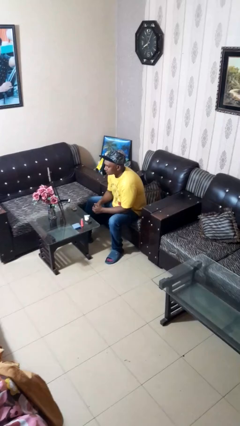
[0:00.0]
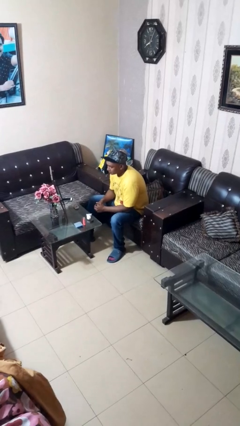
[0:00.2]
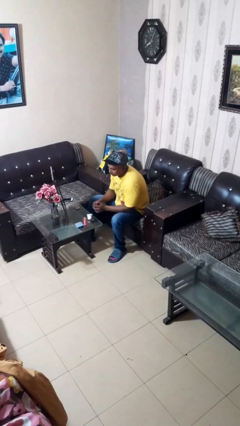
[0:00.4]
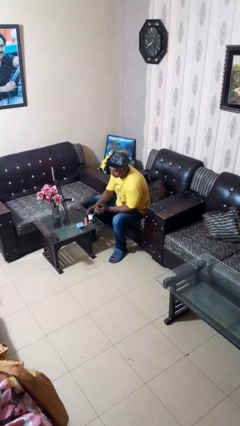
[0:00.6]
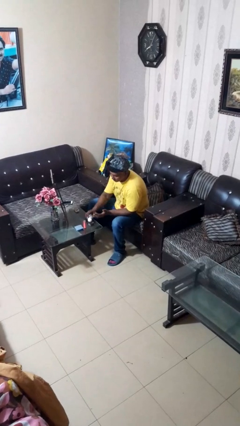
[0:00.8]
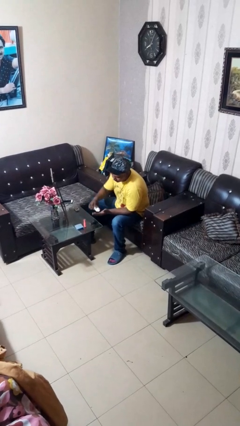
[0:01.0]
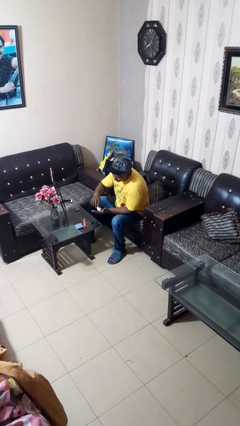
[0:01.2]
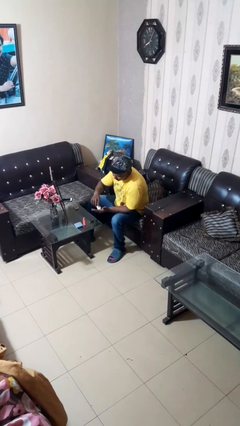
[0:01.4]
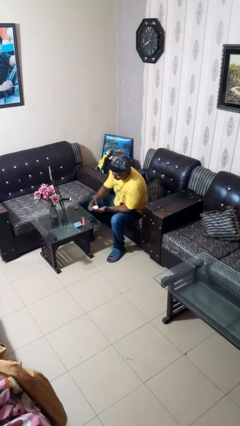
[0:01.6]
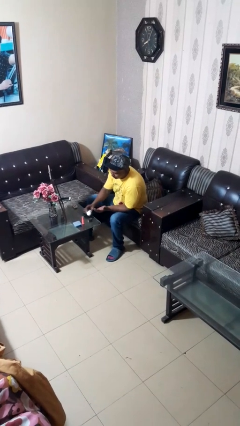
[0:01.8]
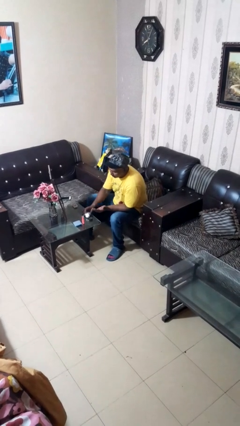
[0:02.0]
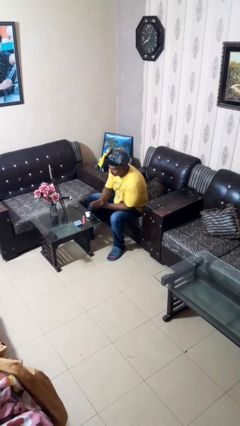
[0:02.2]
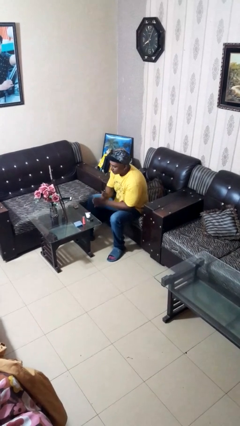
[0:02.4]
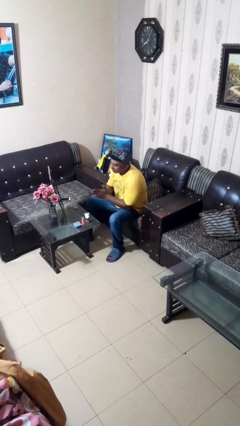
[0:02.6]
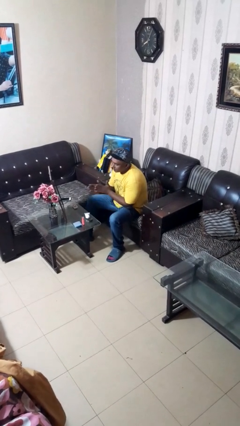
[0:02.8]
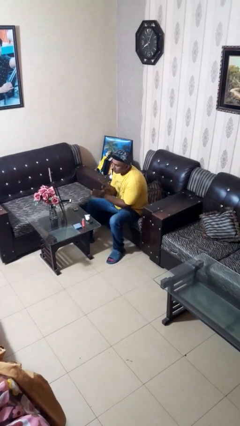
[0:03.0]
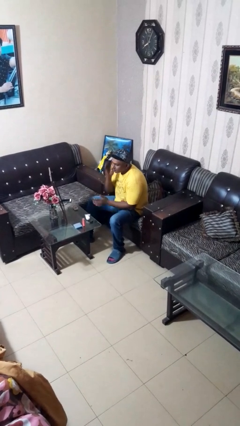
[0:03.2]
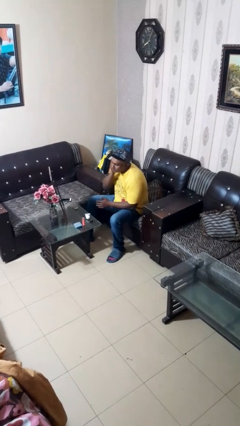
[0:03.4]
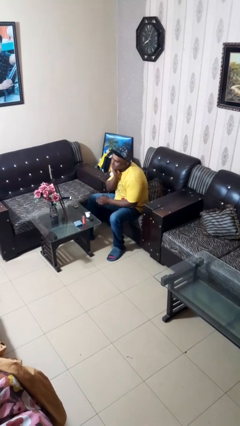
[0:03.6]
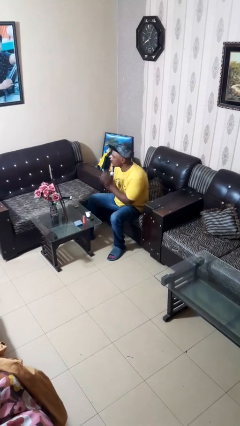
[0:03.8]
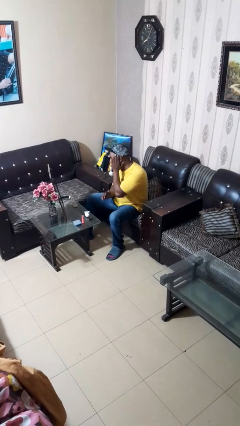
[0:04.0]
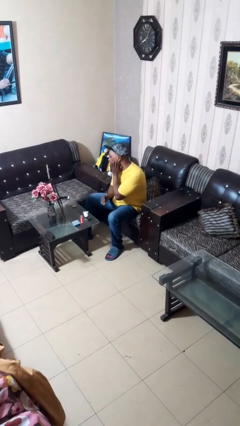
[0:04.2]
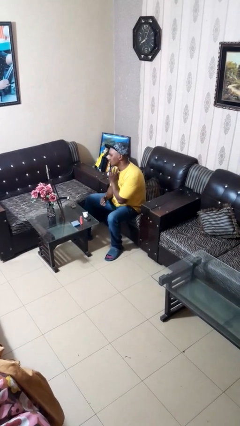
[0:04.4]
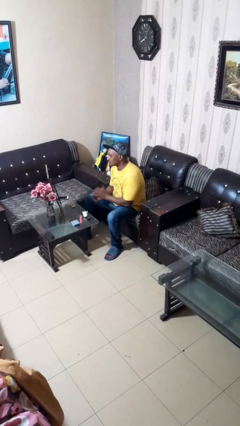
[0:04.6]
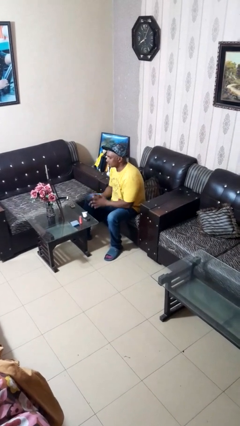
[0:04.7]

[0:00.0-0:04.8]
person applies foundation makeup

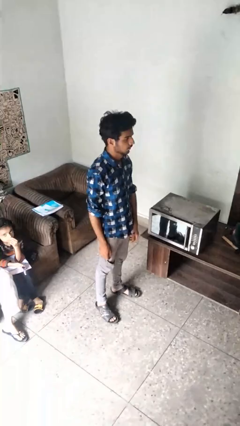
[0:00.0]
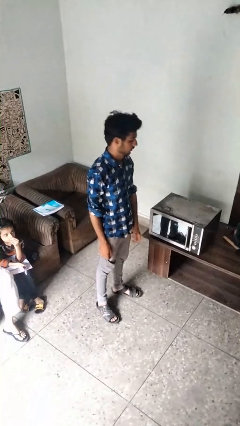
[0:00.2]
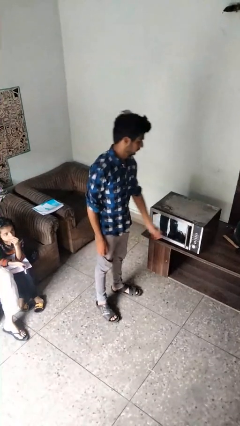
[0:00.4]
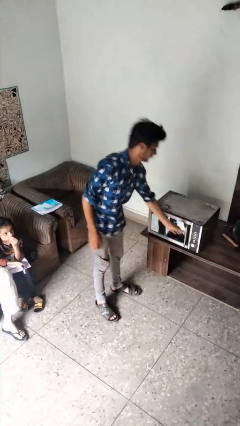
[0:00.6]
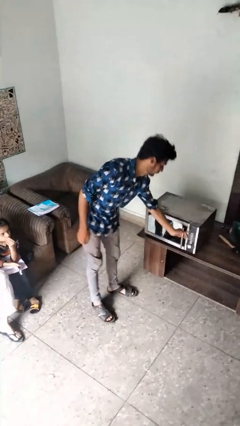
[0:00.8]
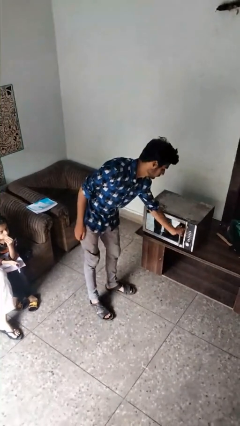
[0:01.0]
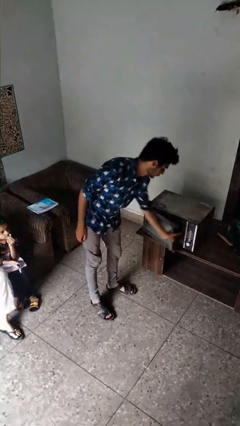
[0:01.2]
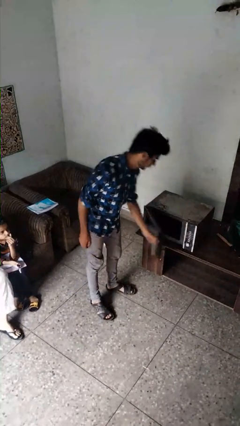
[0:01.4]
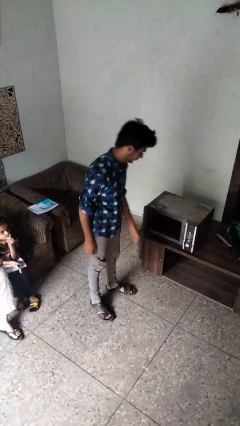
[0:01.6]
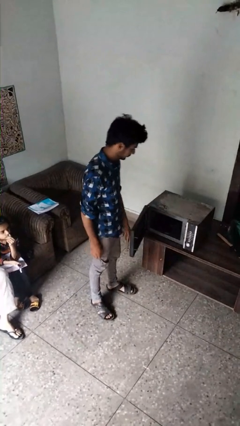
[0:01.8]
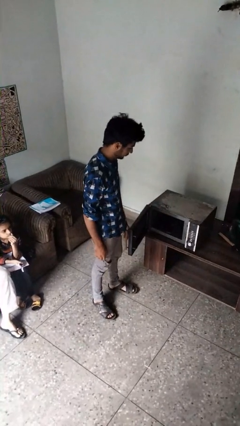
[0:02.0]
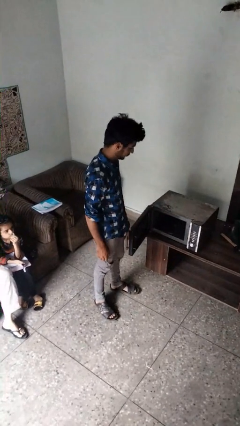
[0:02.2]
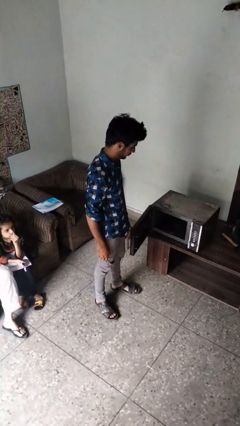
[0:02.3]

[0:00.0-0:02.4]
person opens microwave

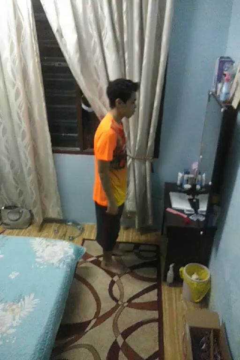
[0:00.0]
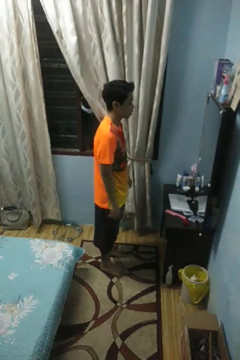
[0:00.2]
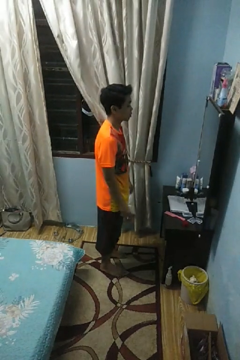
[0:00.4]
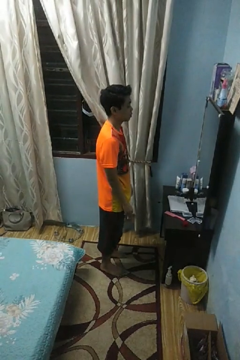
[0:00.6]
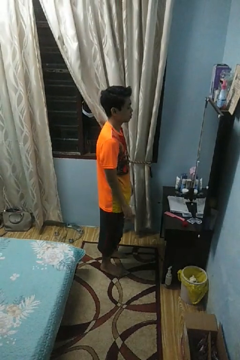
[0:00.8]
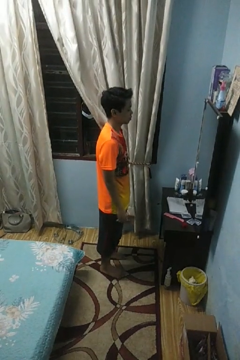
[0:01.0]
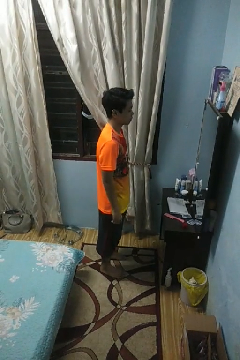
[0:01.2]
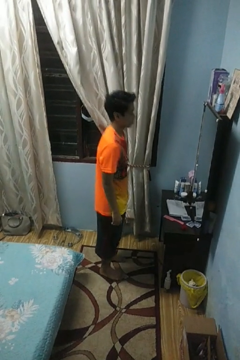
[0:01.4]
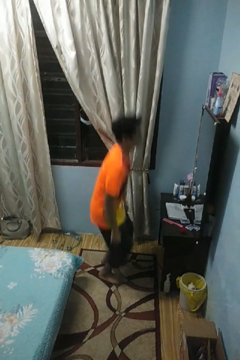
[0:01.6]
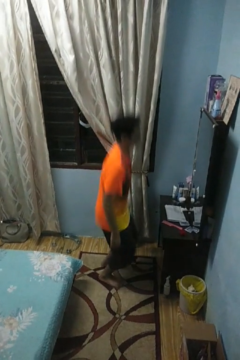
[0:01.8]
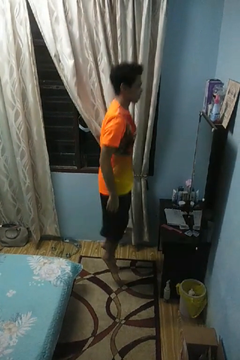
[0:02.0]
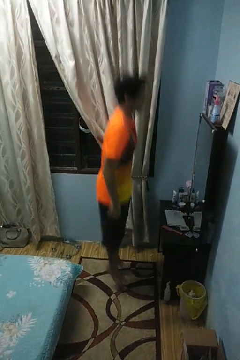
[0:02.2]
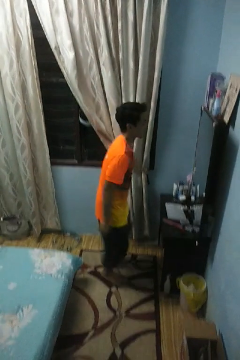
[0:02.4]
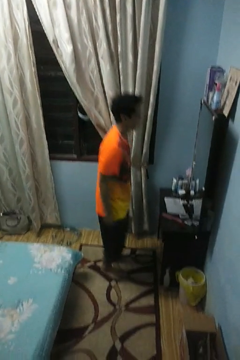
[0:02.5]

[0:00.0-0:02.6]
person jumps

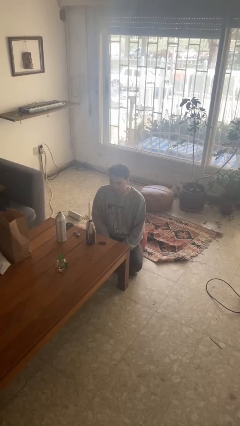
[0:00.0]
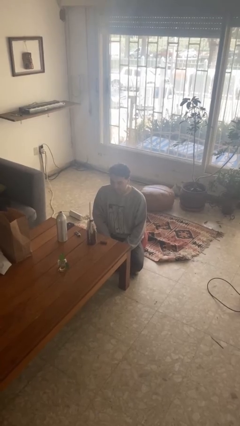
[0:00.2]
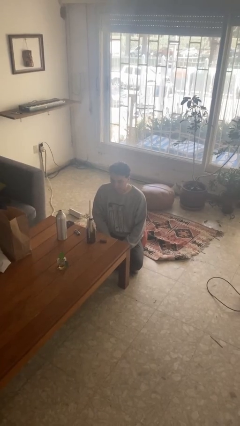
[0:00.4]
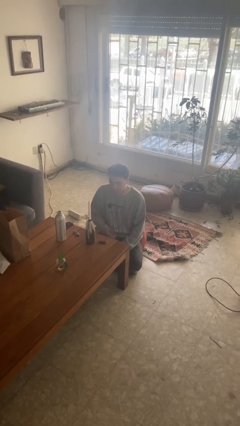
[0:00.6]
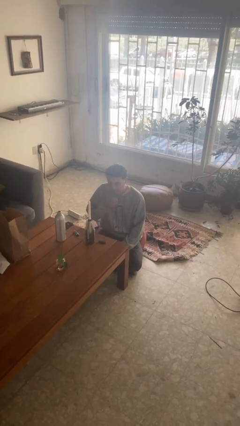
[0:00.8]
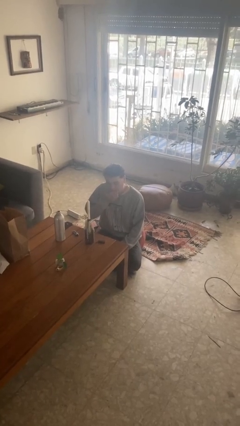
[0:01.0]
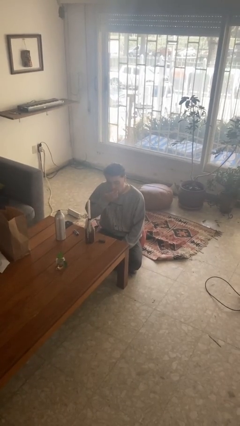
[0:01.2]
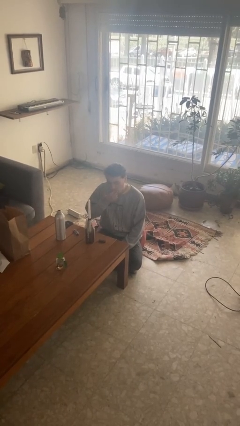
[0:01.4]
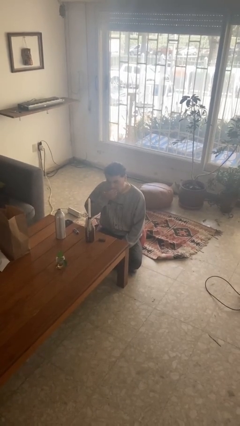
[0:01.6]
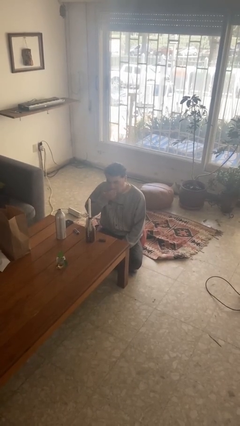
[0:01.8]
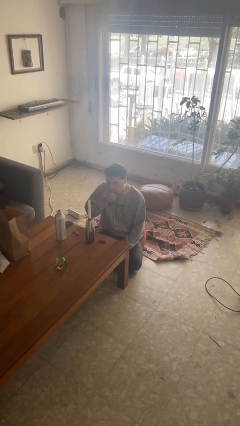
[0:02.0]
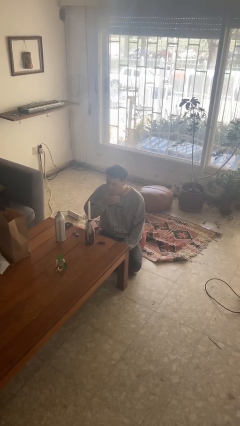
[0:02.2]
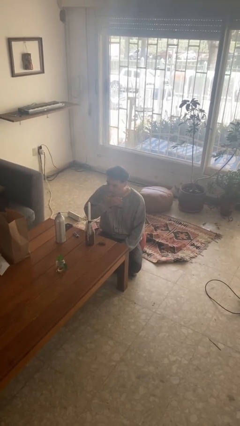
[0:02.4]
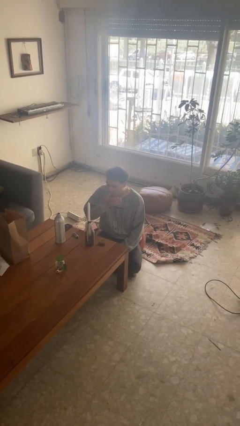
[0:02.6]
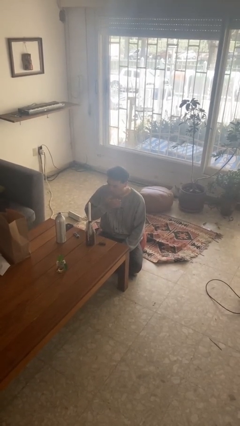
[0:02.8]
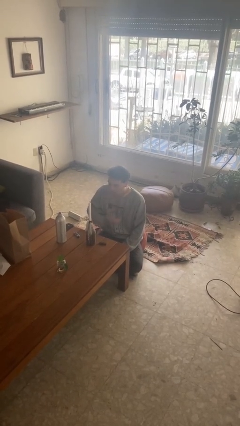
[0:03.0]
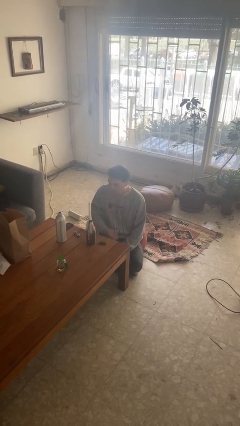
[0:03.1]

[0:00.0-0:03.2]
person licks fingers

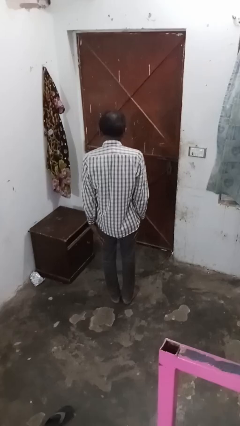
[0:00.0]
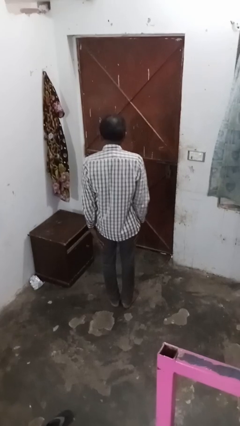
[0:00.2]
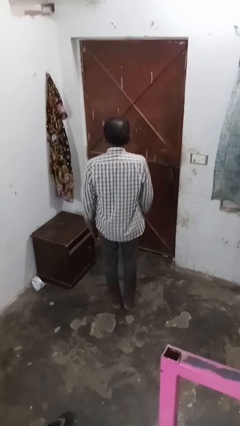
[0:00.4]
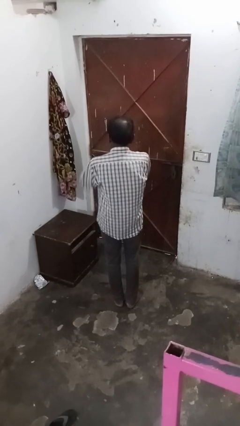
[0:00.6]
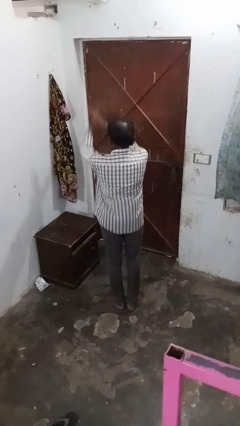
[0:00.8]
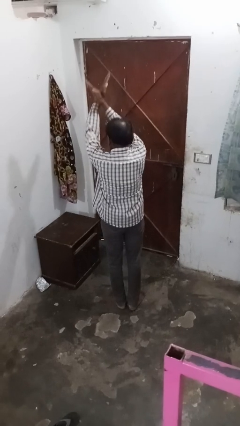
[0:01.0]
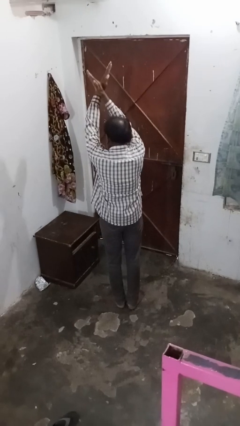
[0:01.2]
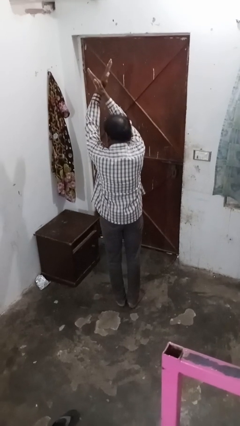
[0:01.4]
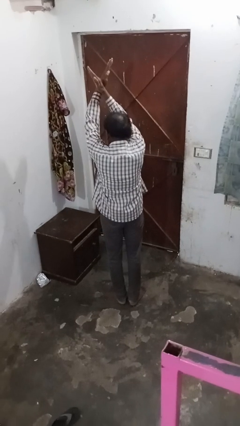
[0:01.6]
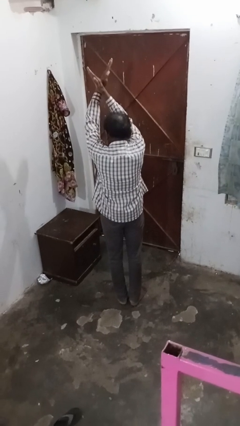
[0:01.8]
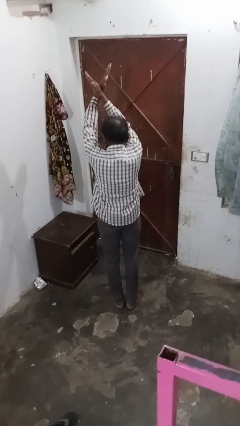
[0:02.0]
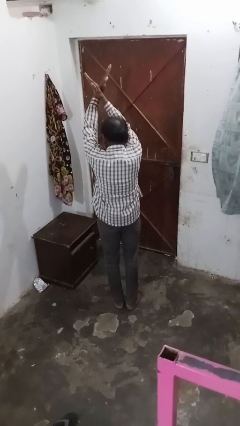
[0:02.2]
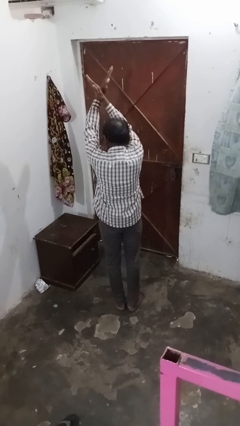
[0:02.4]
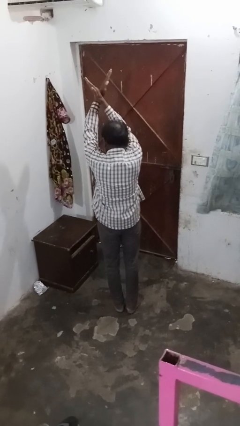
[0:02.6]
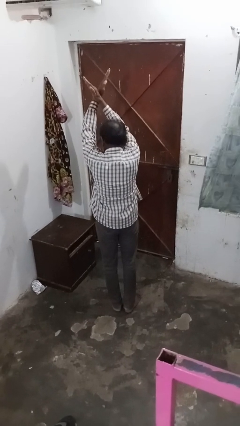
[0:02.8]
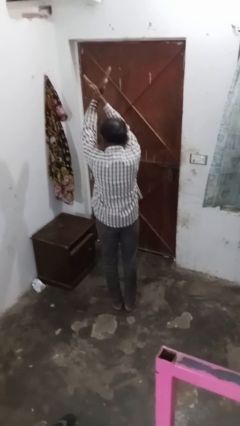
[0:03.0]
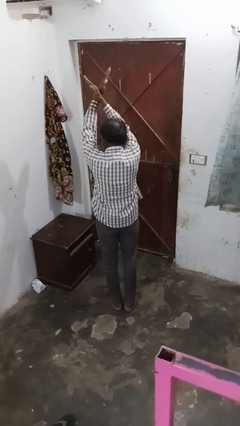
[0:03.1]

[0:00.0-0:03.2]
person gestures arms x

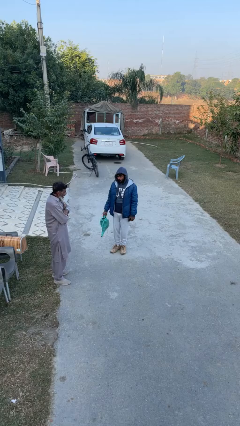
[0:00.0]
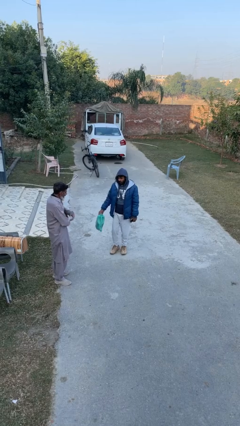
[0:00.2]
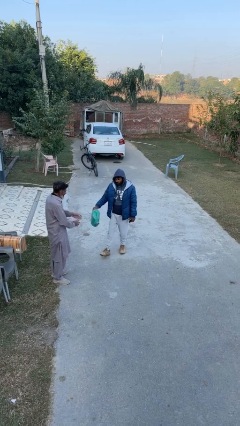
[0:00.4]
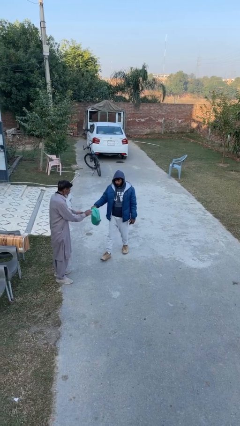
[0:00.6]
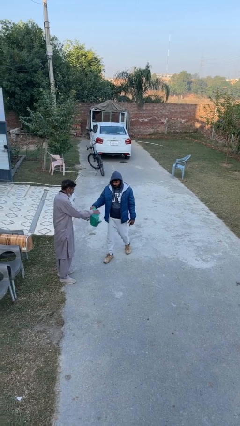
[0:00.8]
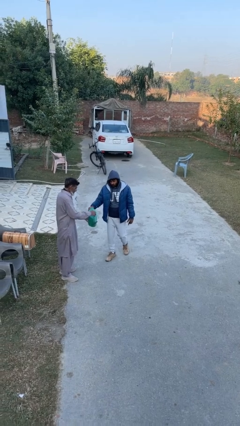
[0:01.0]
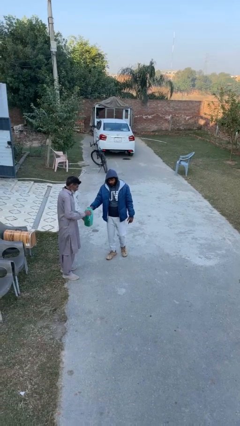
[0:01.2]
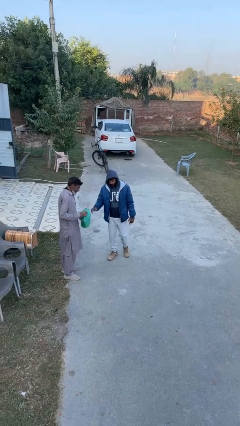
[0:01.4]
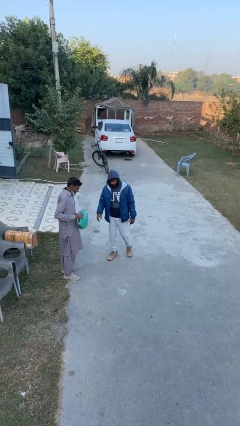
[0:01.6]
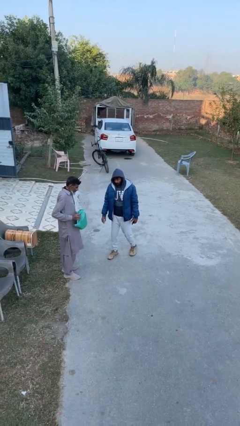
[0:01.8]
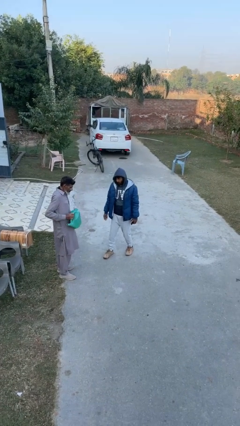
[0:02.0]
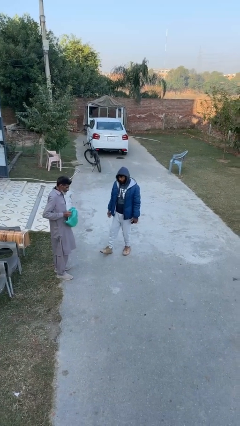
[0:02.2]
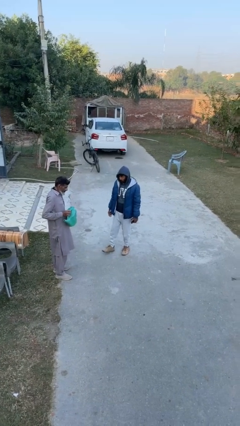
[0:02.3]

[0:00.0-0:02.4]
person transfers object to person
